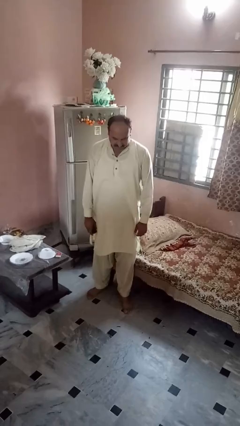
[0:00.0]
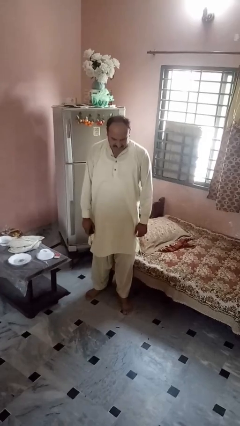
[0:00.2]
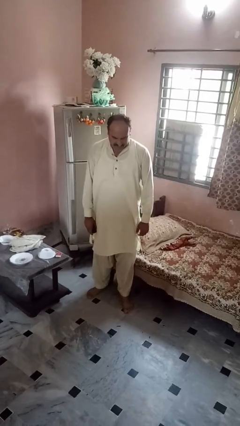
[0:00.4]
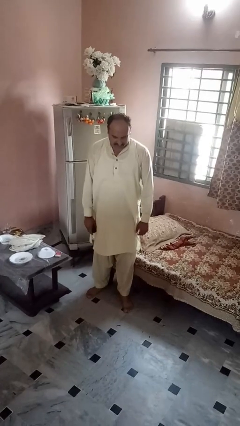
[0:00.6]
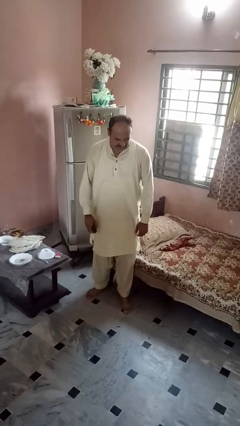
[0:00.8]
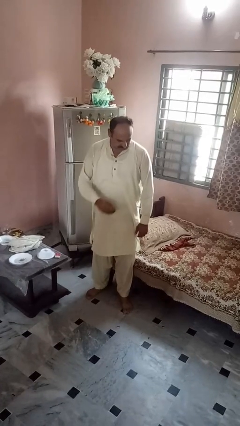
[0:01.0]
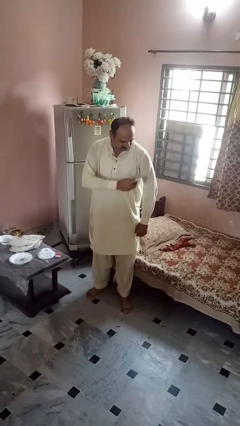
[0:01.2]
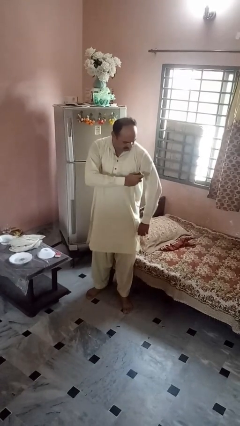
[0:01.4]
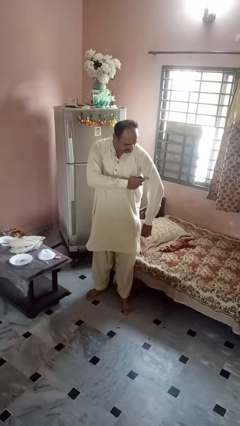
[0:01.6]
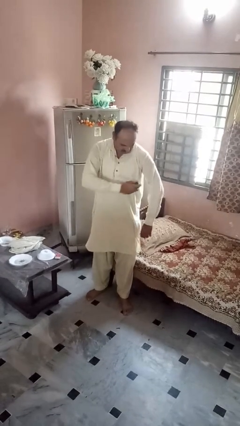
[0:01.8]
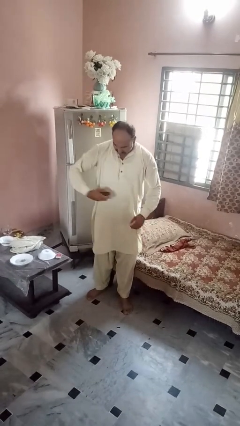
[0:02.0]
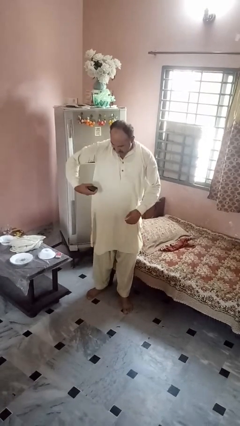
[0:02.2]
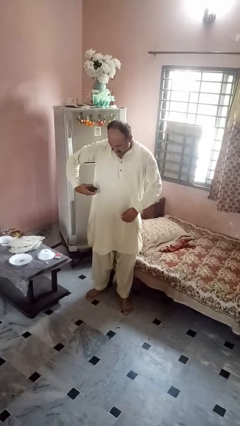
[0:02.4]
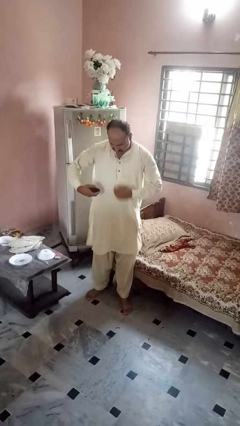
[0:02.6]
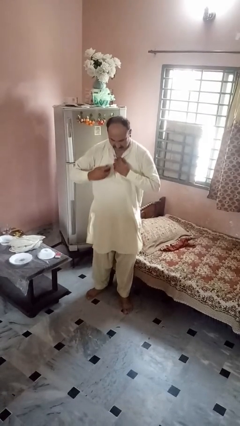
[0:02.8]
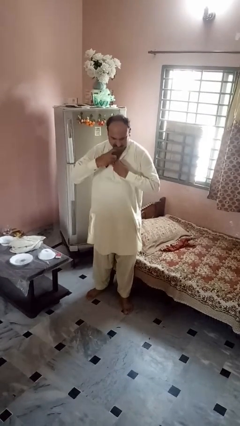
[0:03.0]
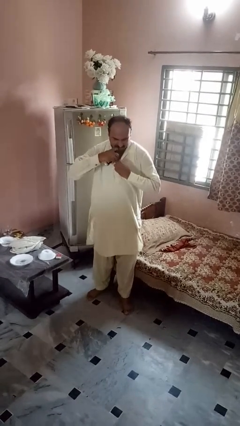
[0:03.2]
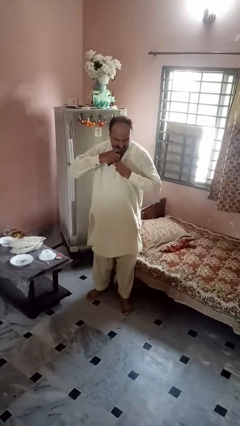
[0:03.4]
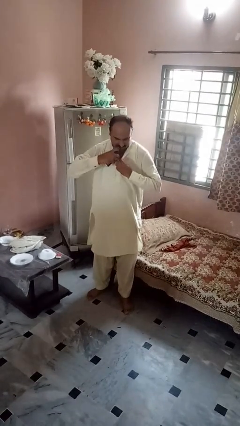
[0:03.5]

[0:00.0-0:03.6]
person applies deodorant

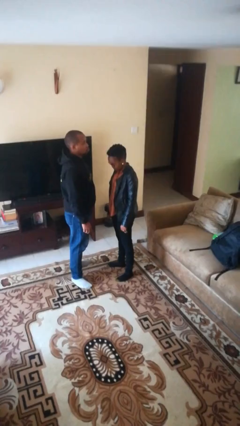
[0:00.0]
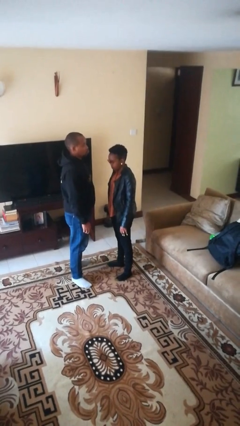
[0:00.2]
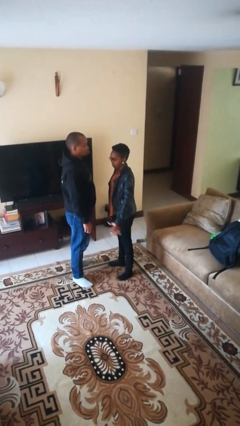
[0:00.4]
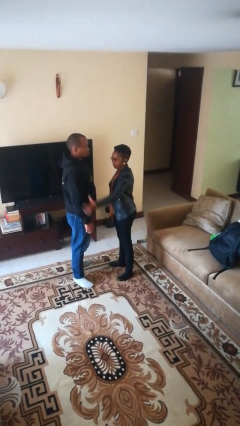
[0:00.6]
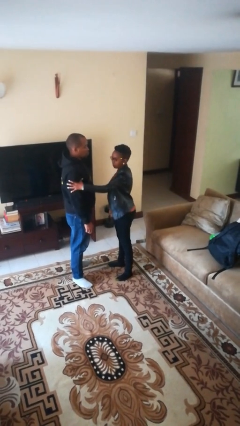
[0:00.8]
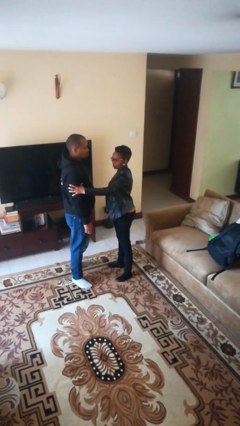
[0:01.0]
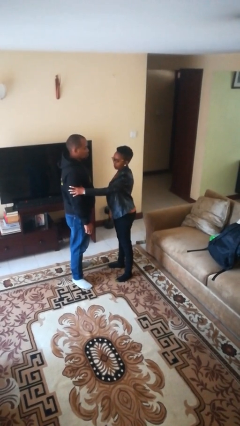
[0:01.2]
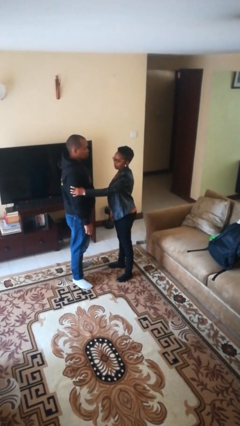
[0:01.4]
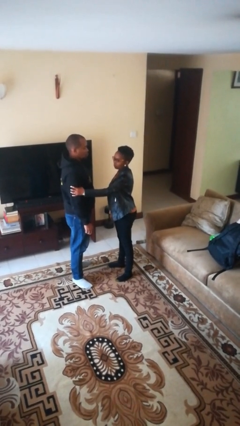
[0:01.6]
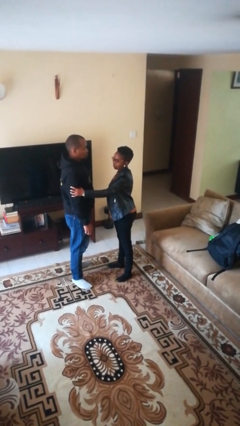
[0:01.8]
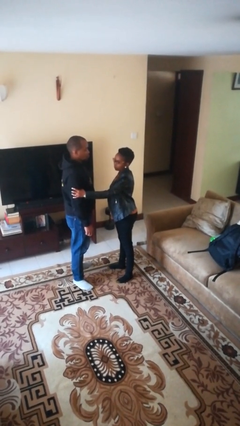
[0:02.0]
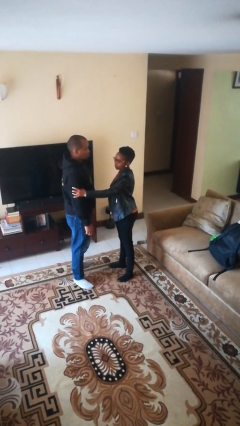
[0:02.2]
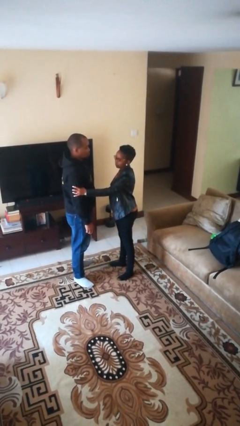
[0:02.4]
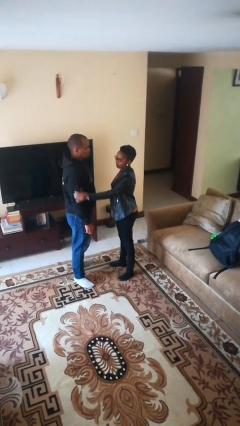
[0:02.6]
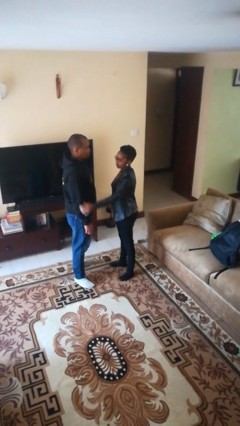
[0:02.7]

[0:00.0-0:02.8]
person grabs person by bicep

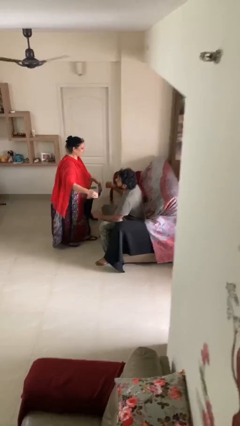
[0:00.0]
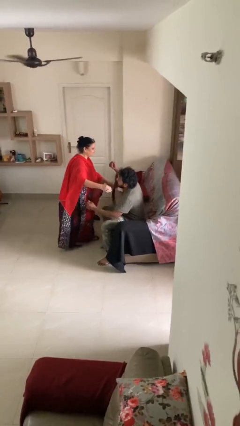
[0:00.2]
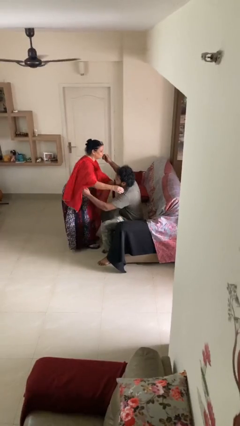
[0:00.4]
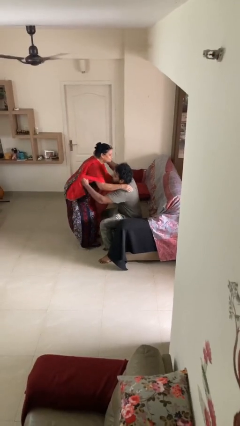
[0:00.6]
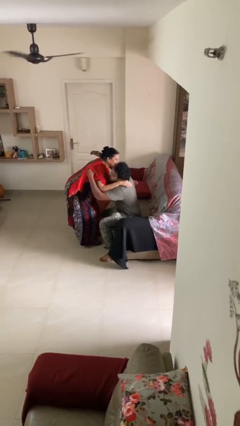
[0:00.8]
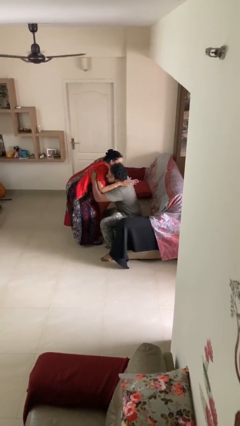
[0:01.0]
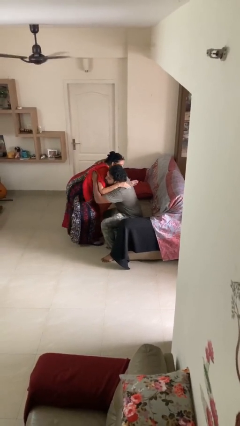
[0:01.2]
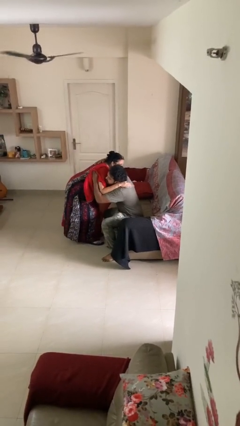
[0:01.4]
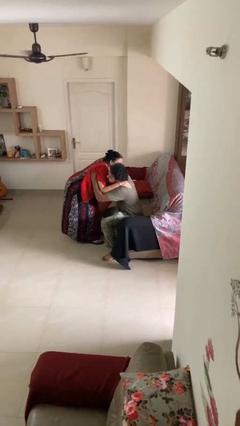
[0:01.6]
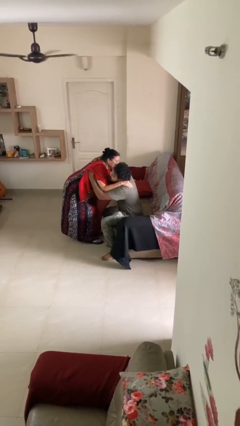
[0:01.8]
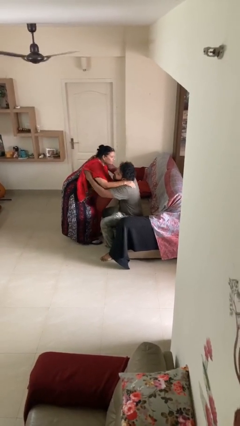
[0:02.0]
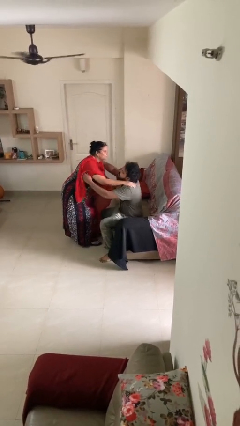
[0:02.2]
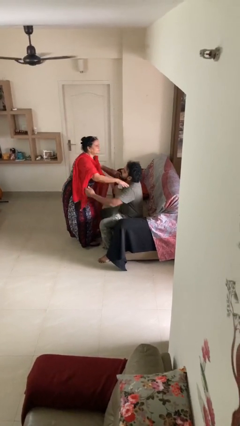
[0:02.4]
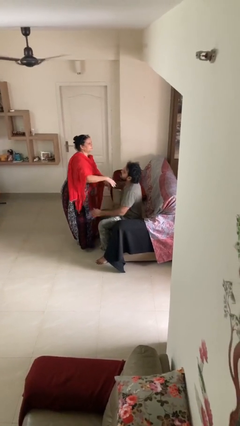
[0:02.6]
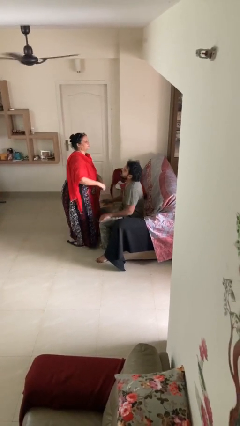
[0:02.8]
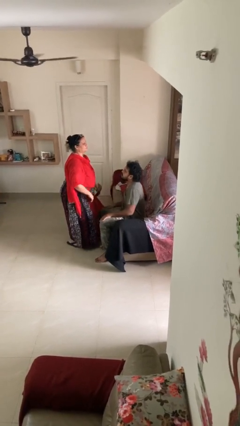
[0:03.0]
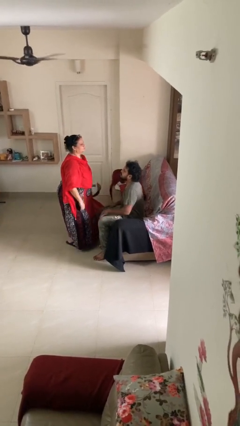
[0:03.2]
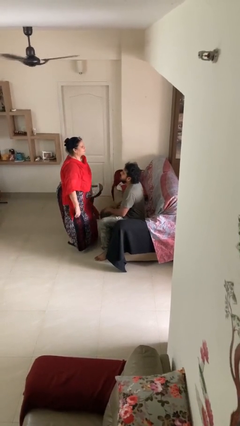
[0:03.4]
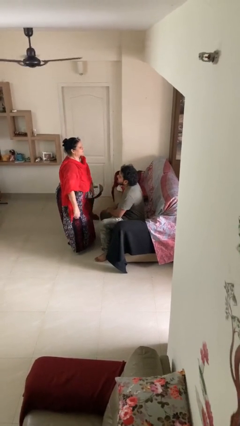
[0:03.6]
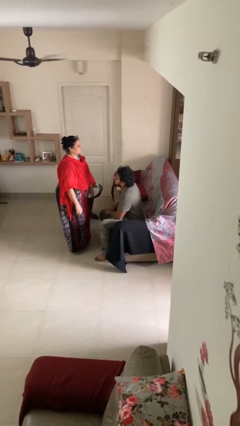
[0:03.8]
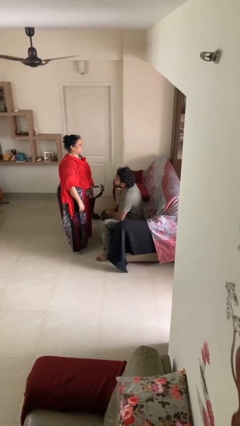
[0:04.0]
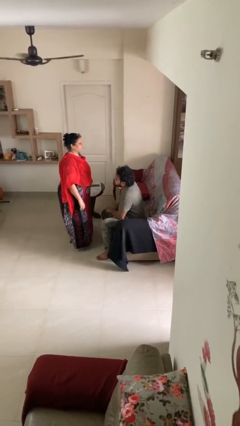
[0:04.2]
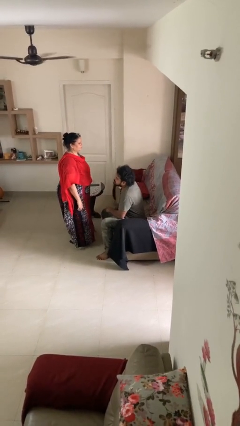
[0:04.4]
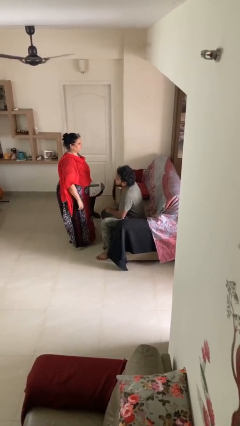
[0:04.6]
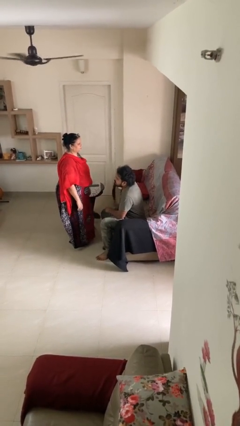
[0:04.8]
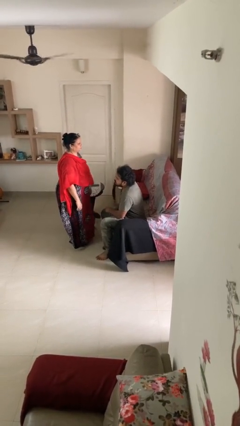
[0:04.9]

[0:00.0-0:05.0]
person embraces person

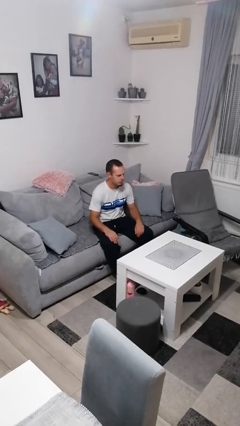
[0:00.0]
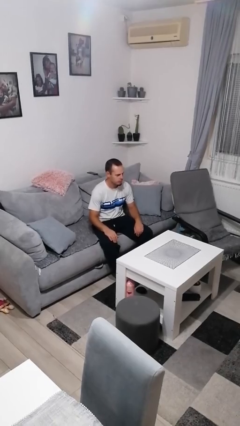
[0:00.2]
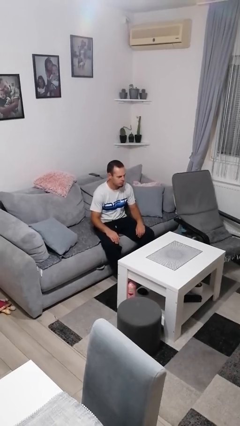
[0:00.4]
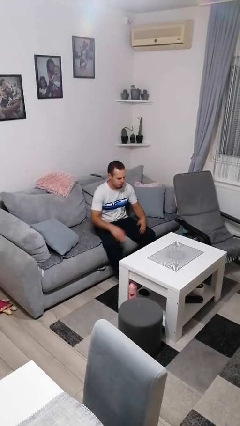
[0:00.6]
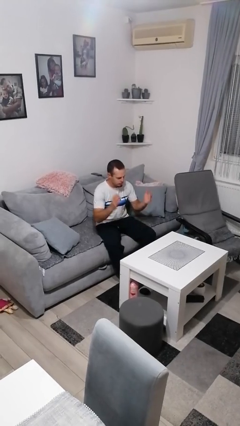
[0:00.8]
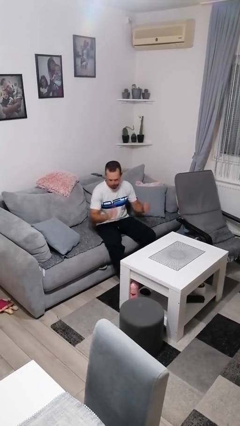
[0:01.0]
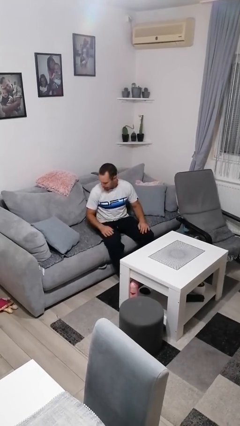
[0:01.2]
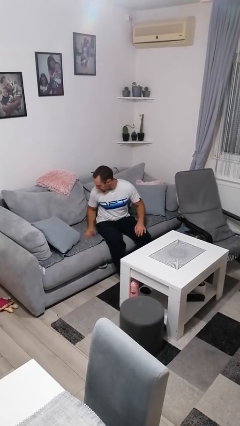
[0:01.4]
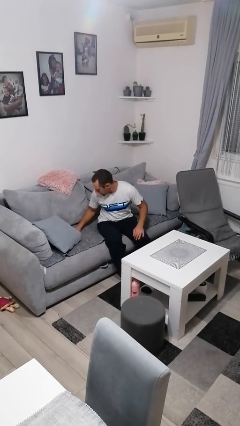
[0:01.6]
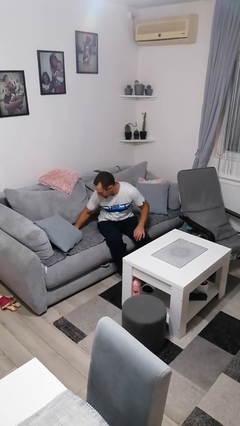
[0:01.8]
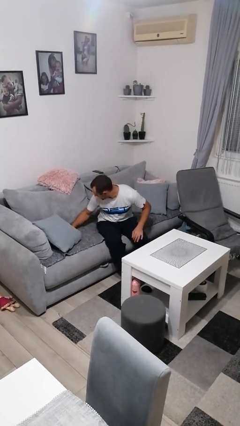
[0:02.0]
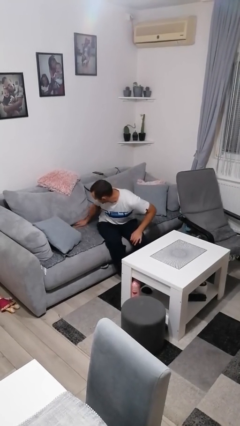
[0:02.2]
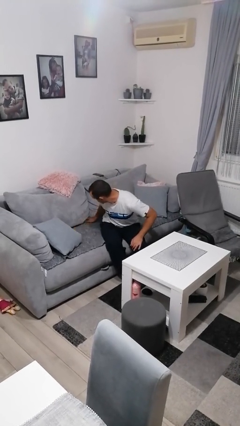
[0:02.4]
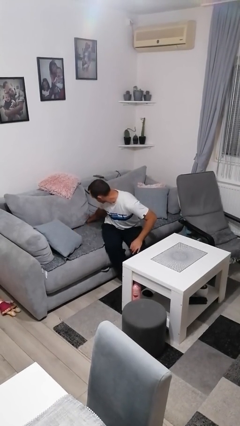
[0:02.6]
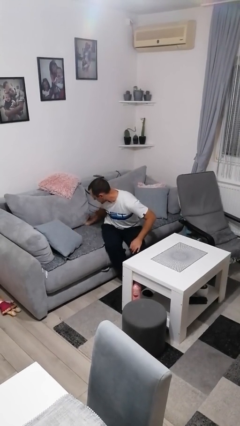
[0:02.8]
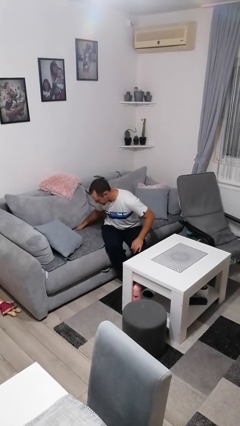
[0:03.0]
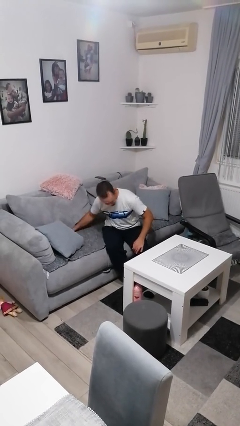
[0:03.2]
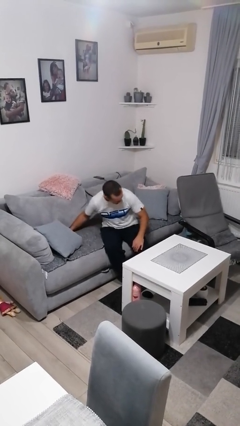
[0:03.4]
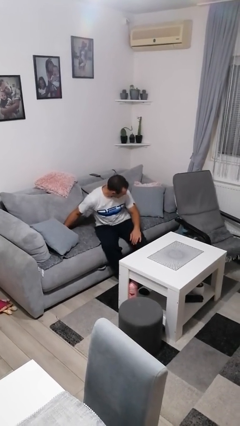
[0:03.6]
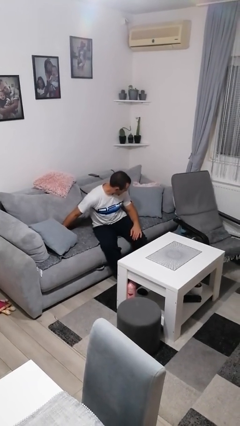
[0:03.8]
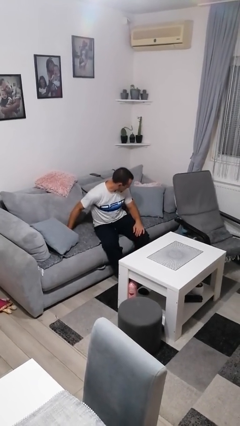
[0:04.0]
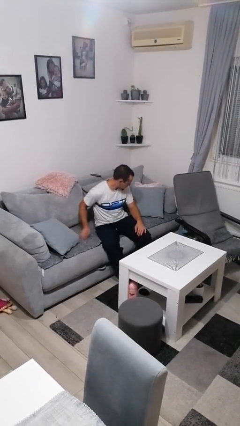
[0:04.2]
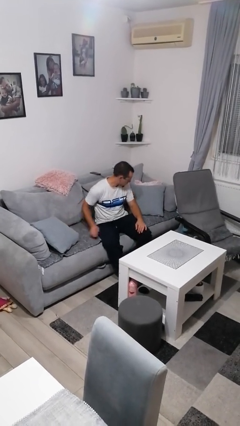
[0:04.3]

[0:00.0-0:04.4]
person searches in couch

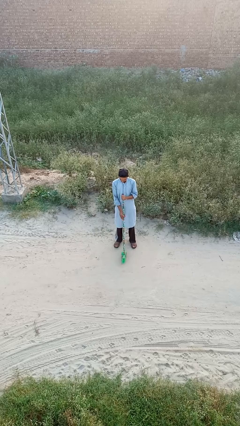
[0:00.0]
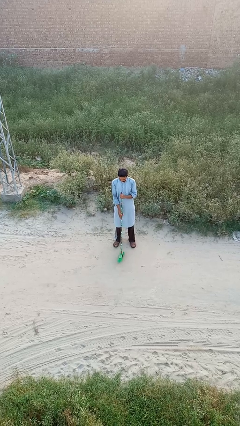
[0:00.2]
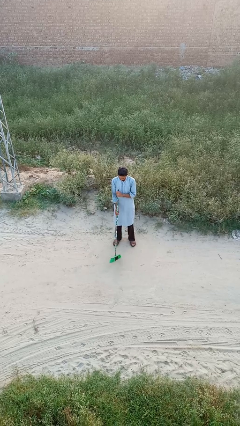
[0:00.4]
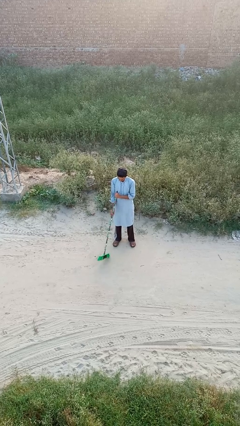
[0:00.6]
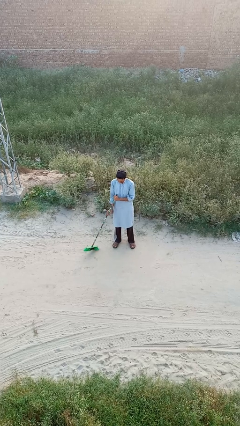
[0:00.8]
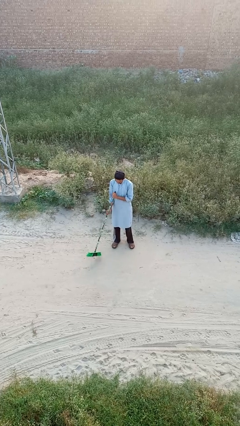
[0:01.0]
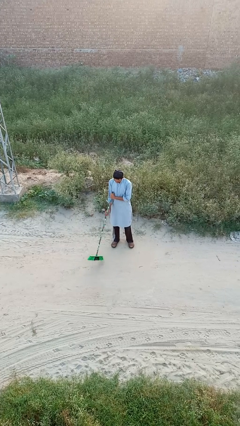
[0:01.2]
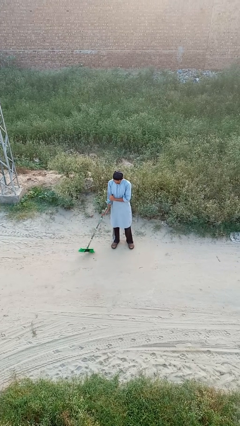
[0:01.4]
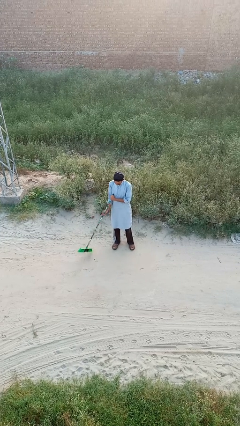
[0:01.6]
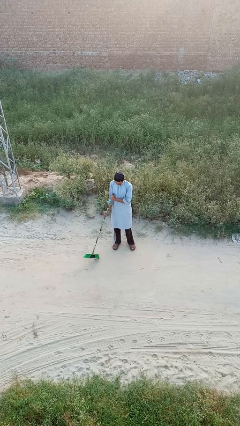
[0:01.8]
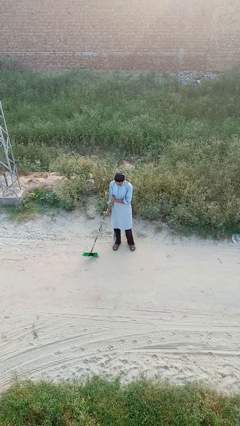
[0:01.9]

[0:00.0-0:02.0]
person sweeps floor
